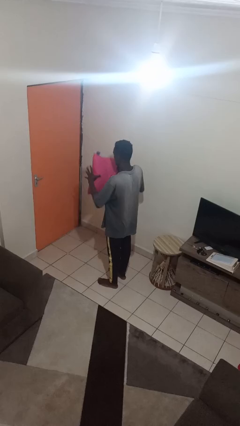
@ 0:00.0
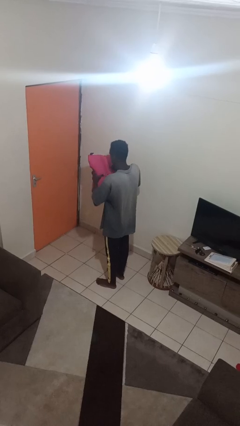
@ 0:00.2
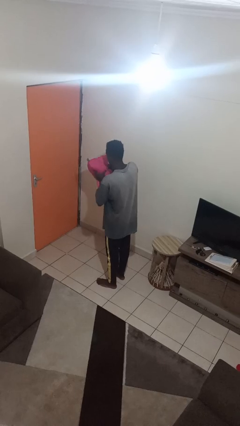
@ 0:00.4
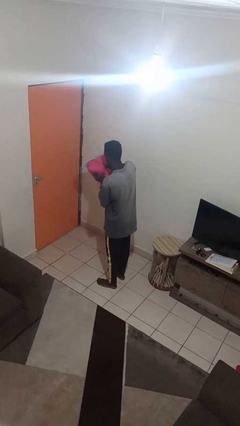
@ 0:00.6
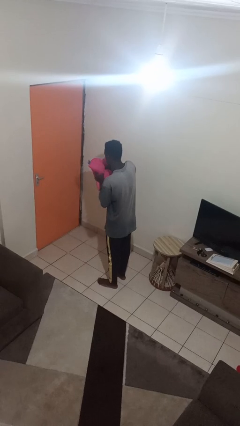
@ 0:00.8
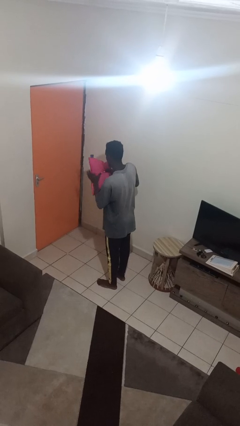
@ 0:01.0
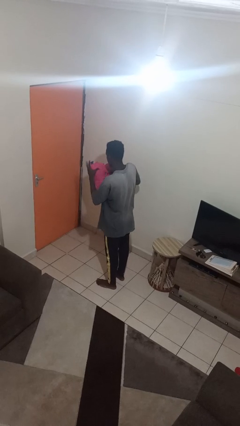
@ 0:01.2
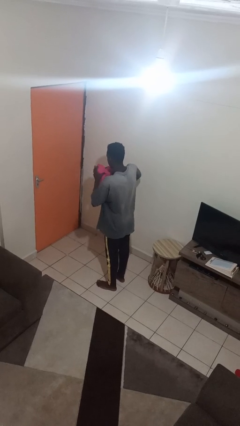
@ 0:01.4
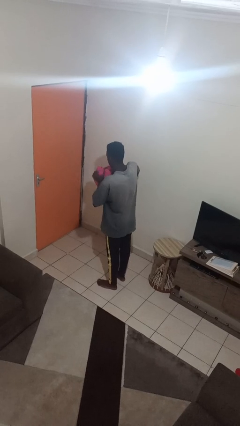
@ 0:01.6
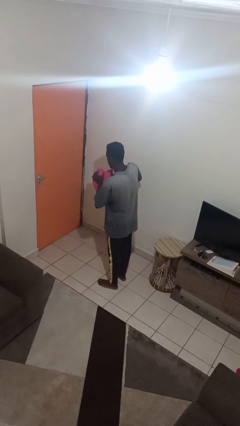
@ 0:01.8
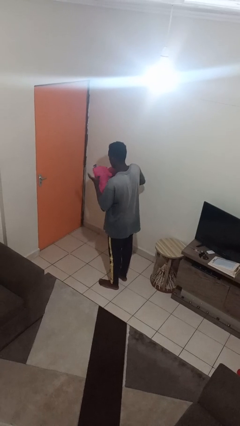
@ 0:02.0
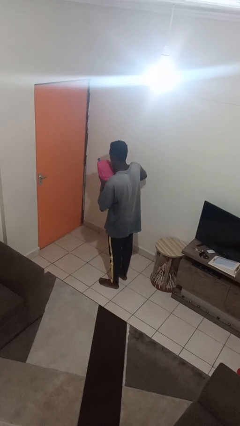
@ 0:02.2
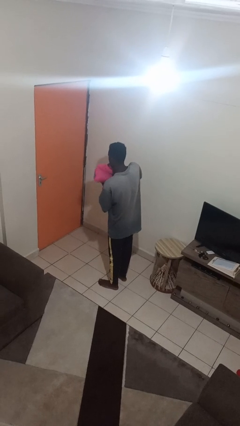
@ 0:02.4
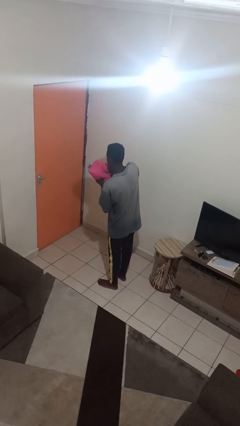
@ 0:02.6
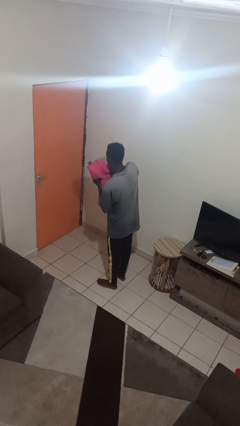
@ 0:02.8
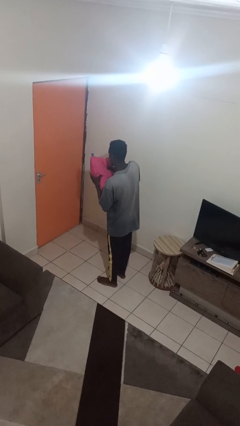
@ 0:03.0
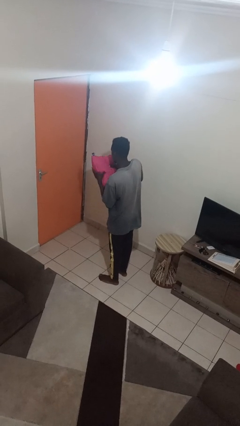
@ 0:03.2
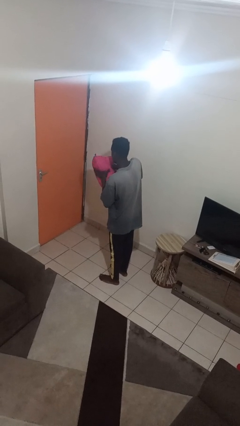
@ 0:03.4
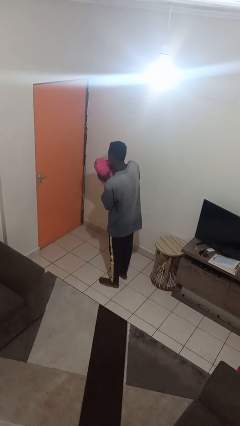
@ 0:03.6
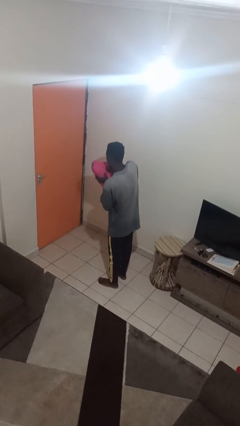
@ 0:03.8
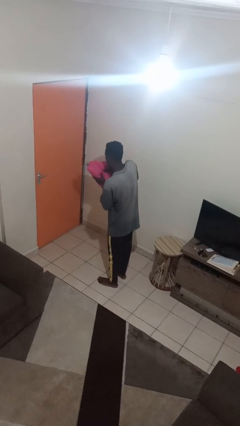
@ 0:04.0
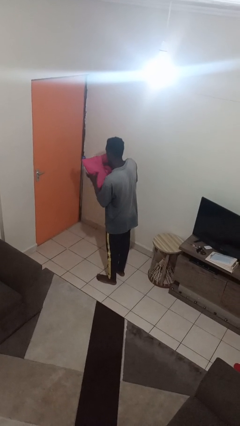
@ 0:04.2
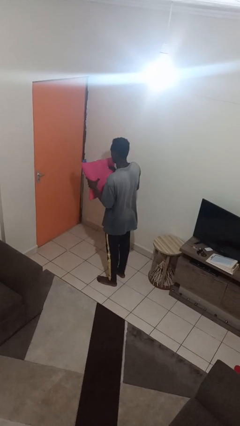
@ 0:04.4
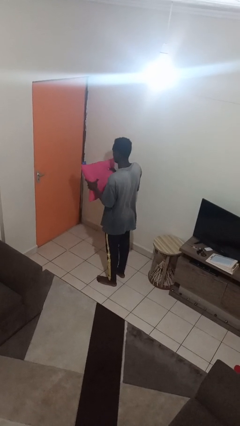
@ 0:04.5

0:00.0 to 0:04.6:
person squeezes object

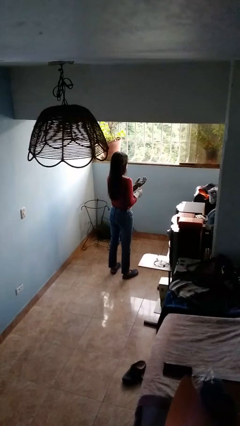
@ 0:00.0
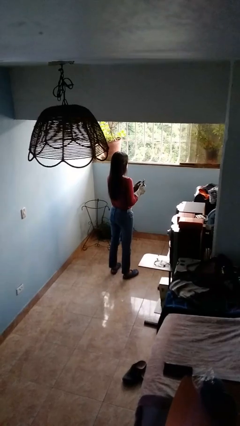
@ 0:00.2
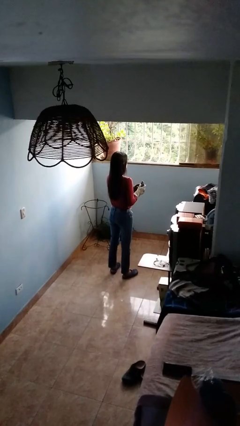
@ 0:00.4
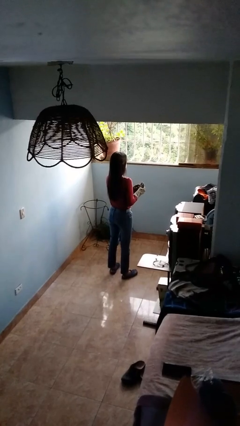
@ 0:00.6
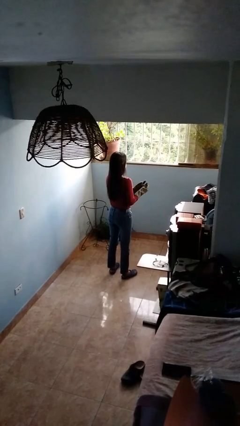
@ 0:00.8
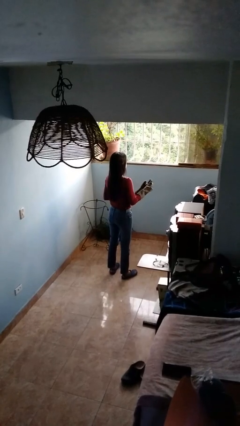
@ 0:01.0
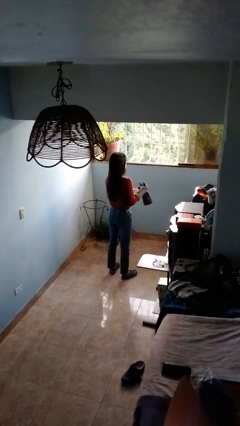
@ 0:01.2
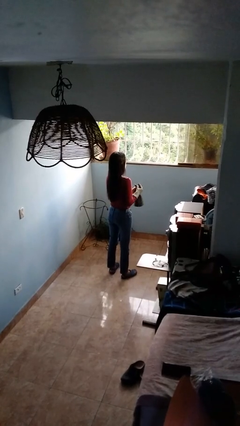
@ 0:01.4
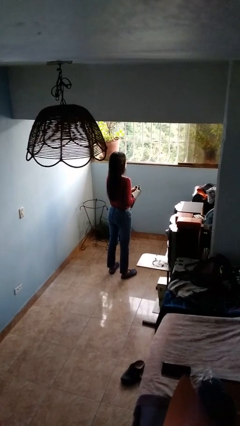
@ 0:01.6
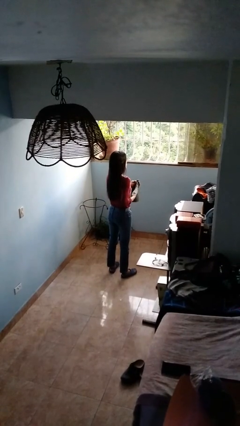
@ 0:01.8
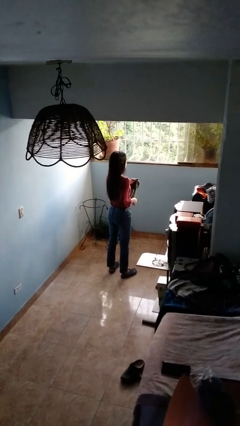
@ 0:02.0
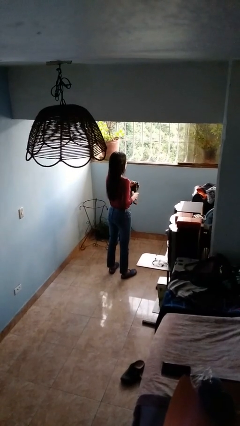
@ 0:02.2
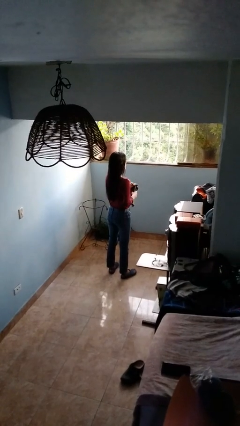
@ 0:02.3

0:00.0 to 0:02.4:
person takes off gloves

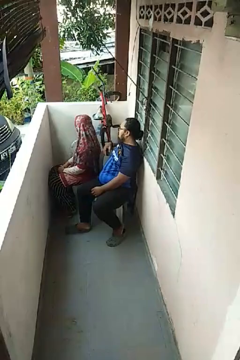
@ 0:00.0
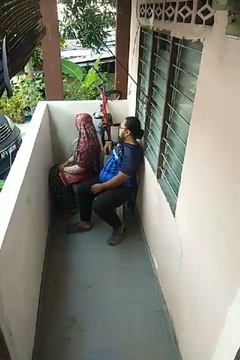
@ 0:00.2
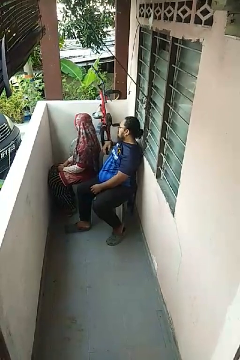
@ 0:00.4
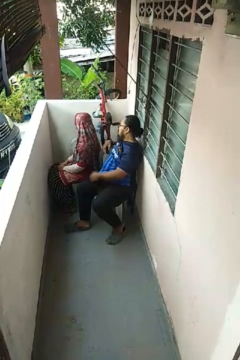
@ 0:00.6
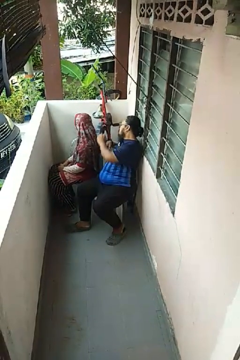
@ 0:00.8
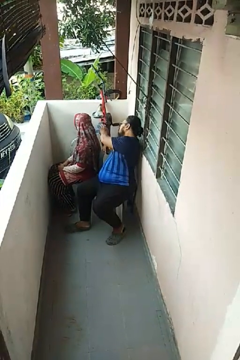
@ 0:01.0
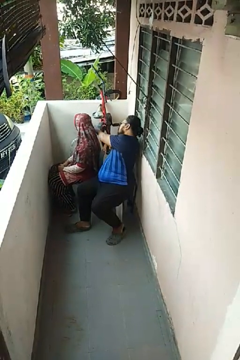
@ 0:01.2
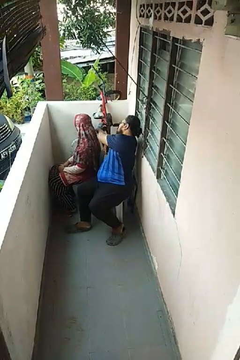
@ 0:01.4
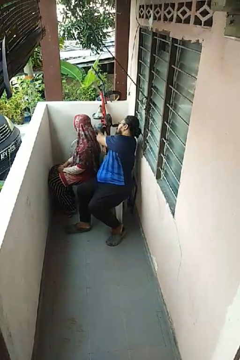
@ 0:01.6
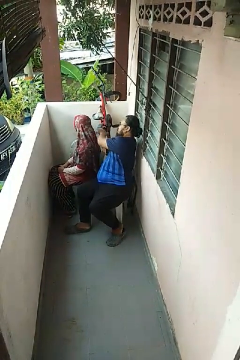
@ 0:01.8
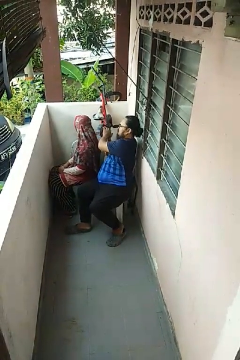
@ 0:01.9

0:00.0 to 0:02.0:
person touches back of person

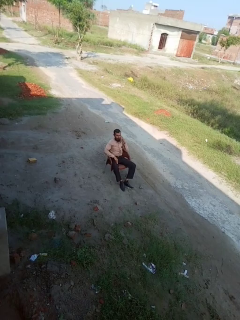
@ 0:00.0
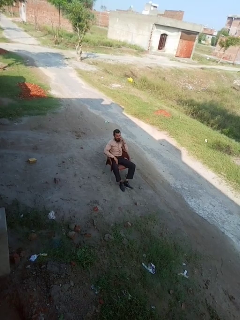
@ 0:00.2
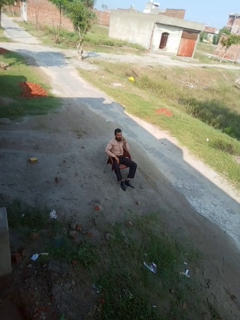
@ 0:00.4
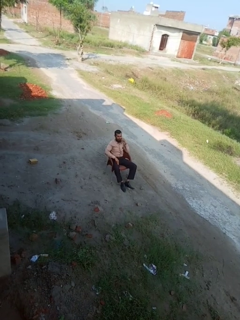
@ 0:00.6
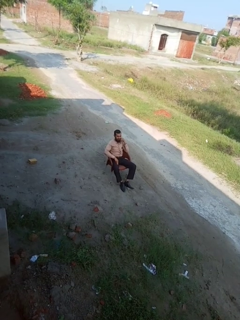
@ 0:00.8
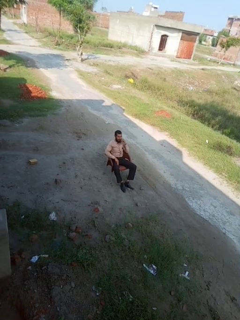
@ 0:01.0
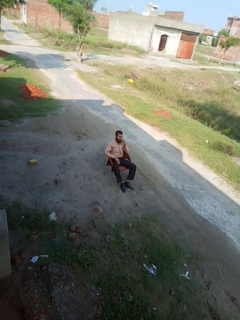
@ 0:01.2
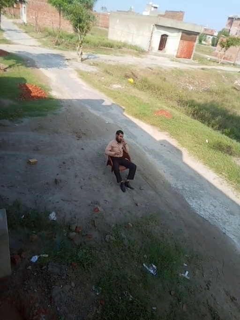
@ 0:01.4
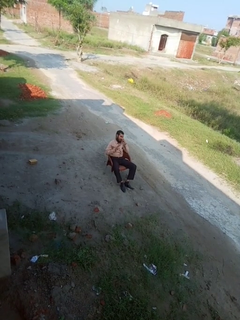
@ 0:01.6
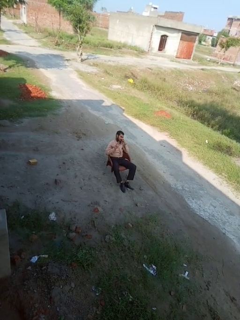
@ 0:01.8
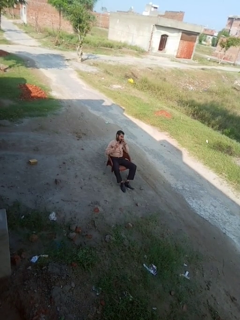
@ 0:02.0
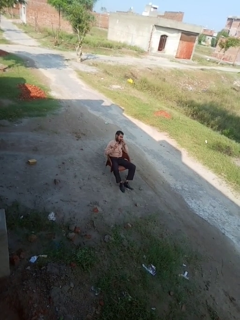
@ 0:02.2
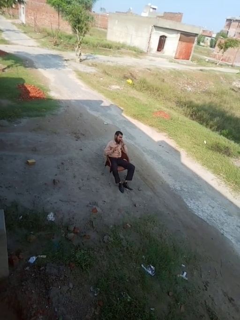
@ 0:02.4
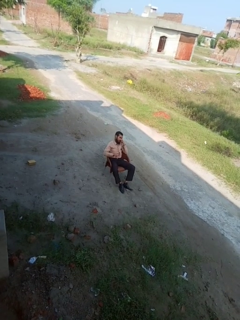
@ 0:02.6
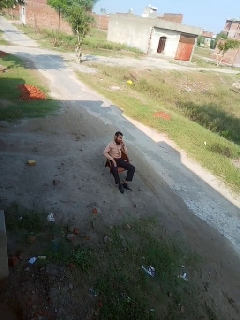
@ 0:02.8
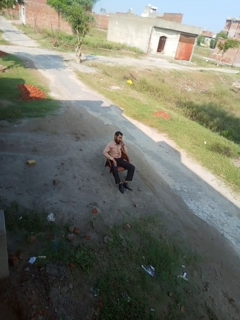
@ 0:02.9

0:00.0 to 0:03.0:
person gestures number three

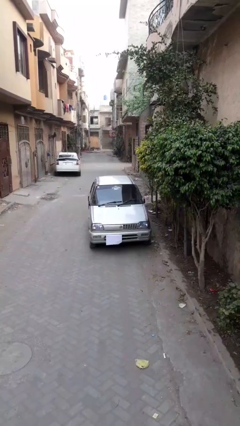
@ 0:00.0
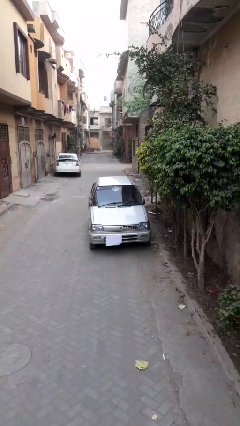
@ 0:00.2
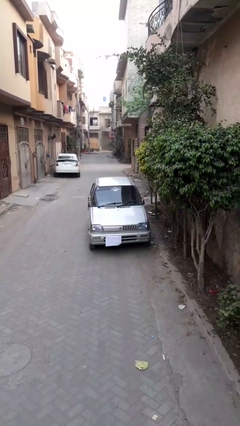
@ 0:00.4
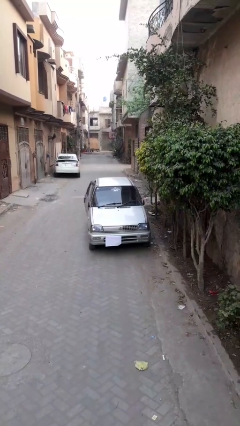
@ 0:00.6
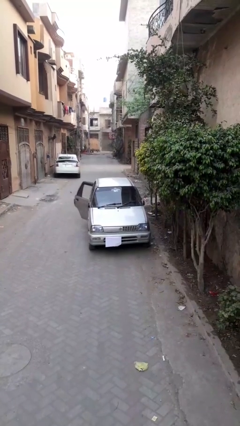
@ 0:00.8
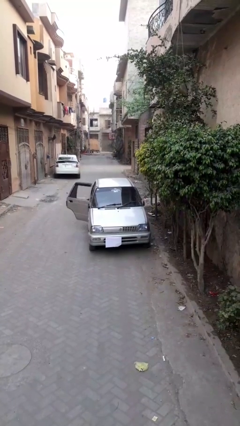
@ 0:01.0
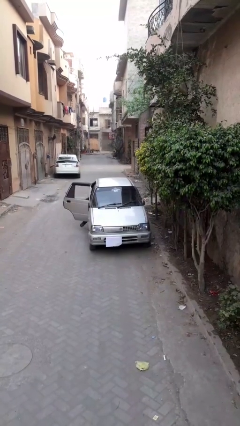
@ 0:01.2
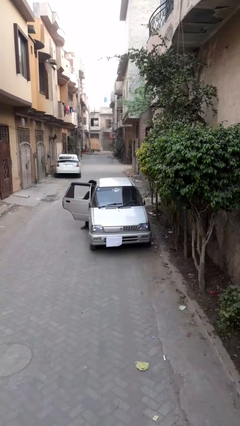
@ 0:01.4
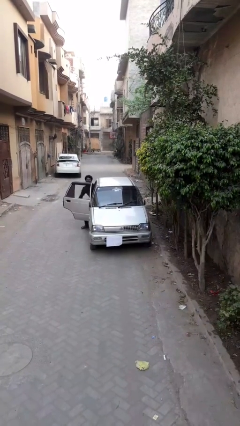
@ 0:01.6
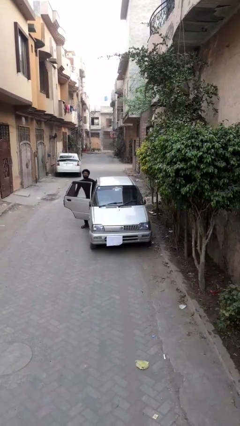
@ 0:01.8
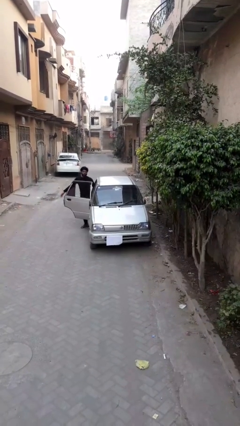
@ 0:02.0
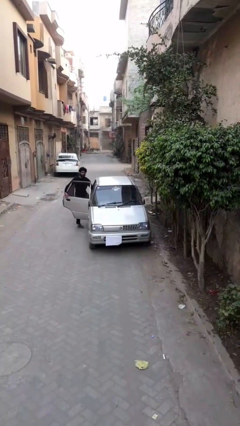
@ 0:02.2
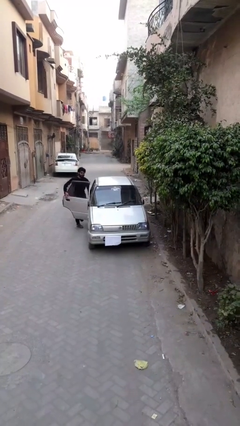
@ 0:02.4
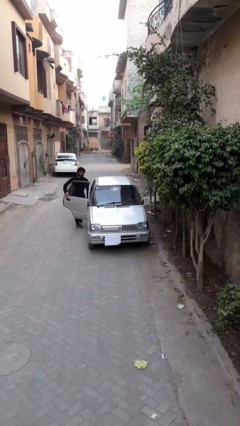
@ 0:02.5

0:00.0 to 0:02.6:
car drops off person

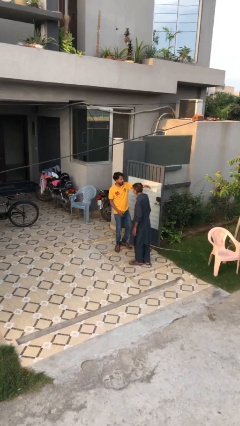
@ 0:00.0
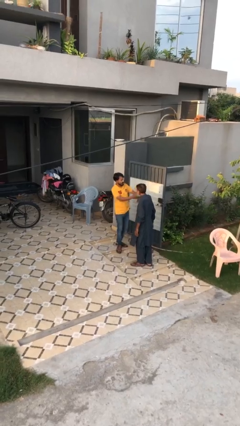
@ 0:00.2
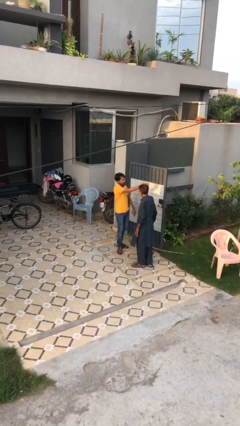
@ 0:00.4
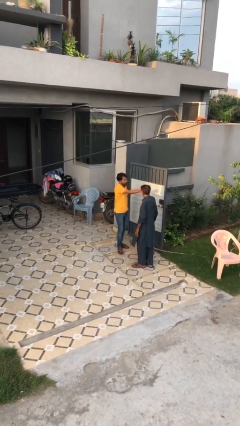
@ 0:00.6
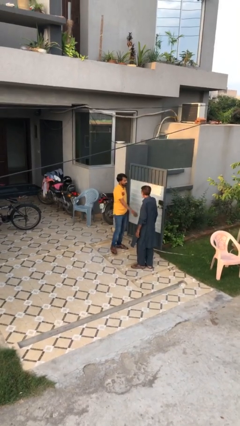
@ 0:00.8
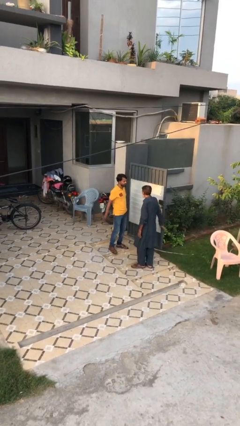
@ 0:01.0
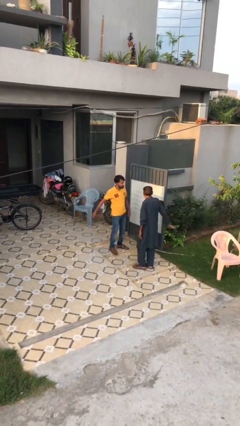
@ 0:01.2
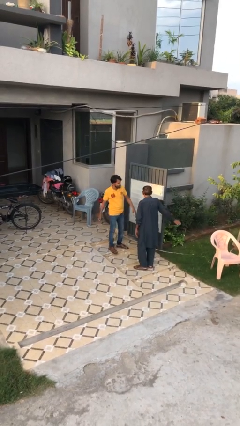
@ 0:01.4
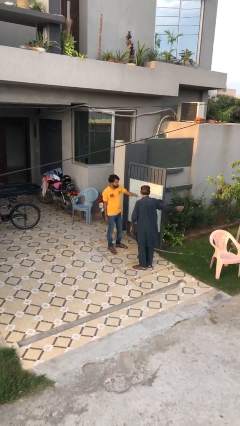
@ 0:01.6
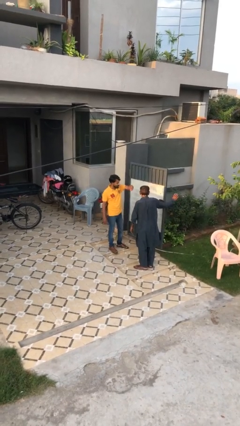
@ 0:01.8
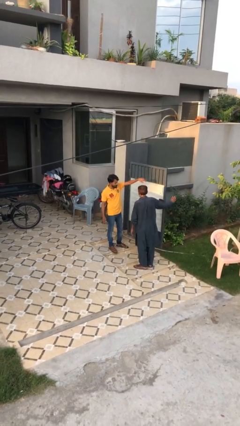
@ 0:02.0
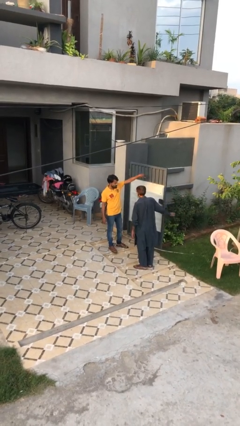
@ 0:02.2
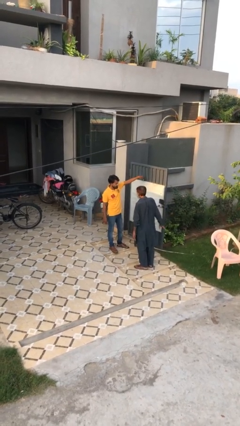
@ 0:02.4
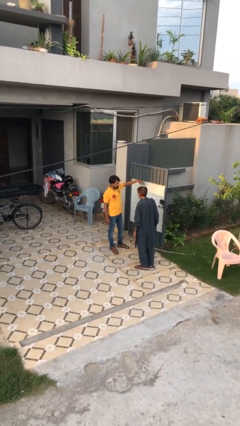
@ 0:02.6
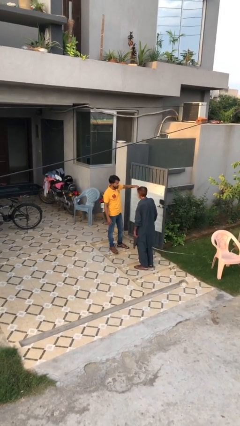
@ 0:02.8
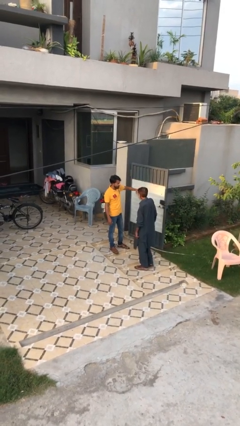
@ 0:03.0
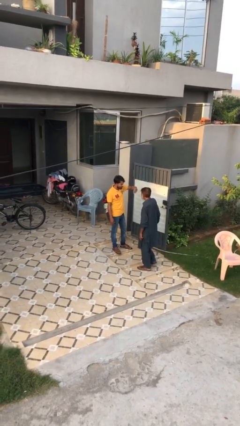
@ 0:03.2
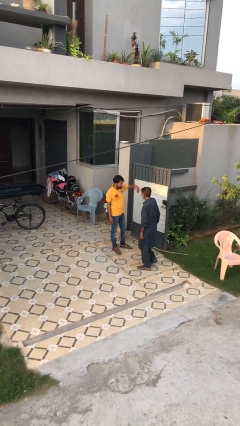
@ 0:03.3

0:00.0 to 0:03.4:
person talks to person
